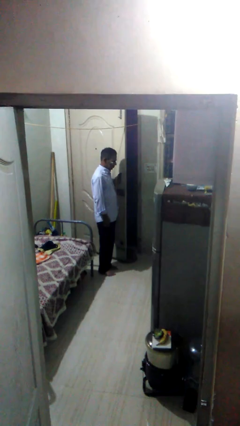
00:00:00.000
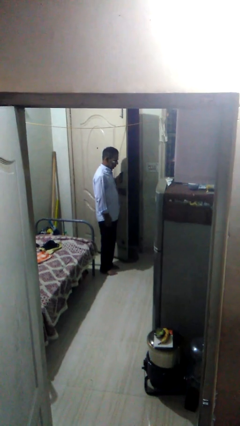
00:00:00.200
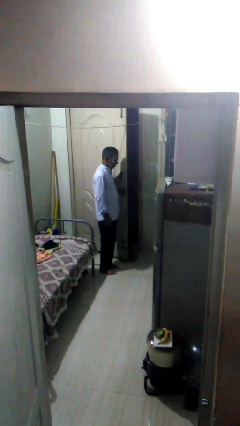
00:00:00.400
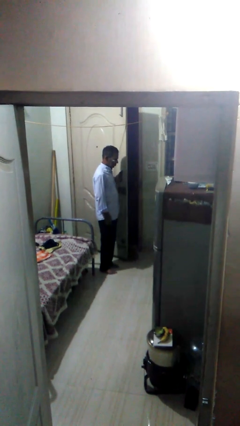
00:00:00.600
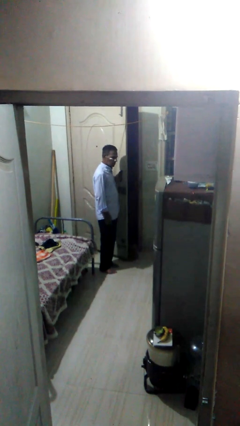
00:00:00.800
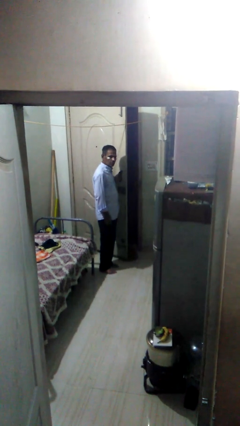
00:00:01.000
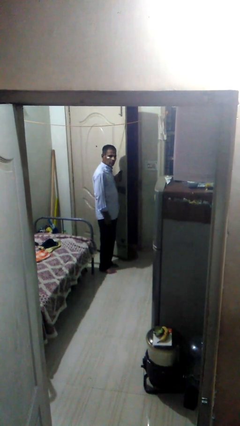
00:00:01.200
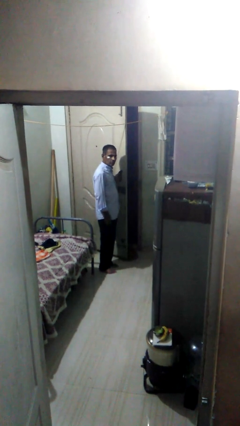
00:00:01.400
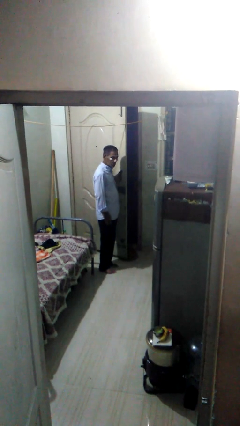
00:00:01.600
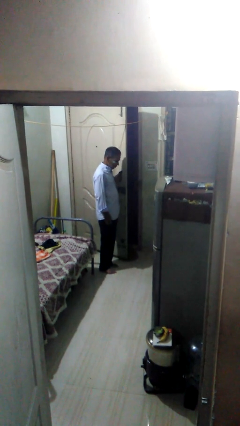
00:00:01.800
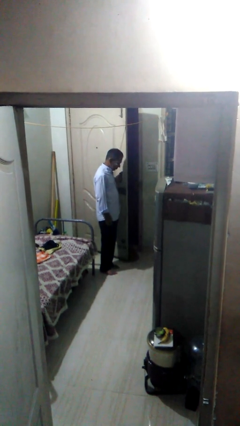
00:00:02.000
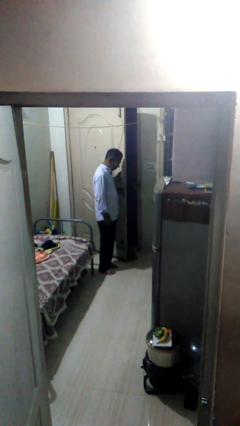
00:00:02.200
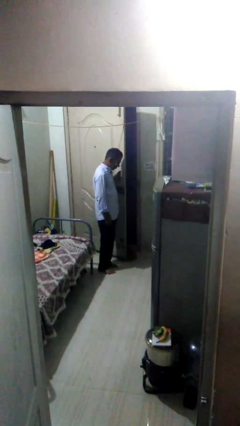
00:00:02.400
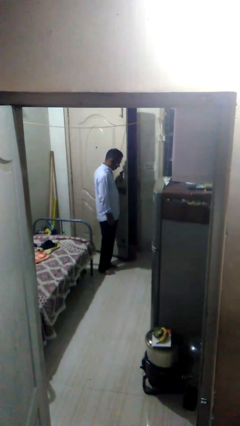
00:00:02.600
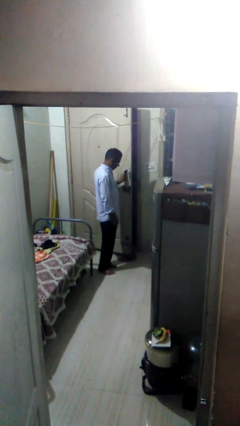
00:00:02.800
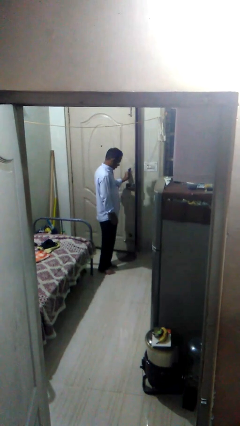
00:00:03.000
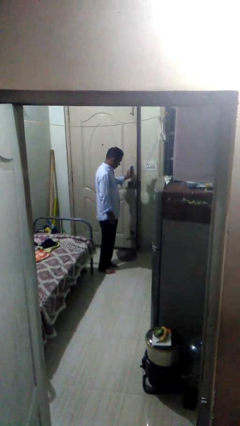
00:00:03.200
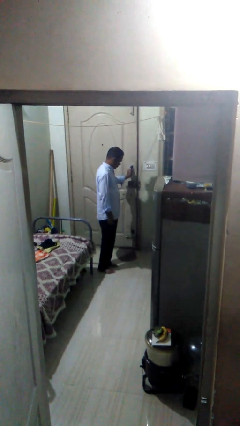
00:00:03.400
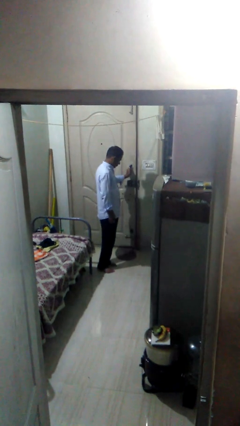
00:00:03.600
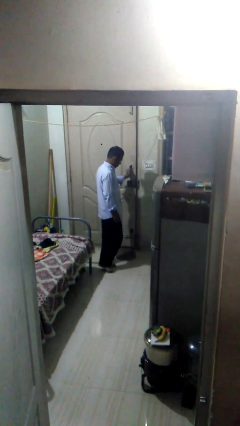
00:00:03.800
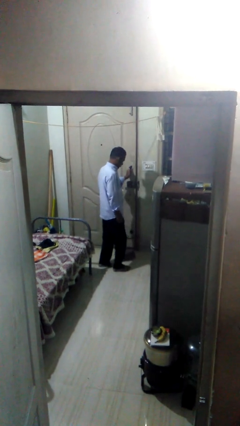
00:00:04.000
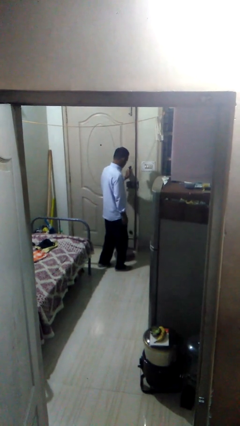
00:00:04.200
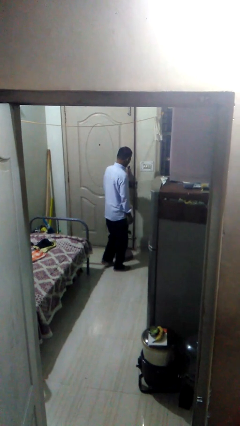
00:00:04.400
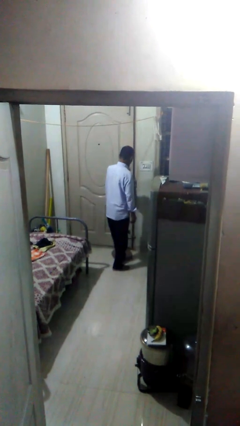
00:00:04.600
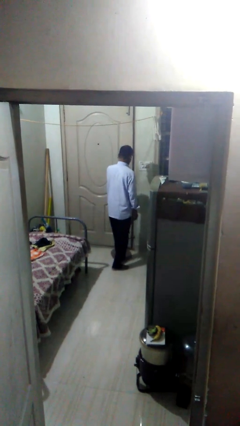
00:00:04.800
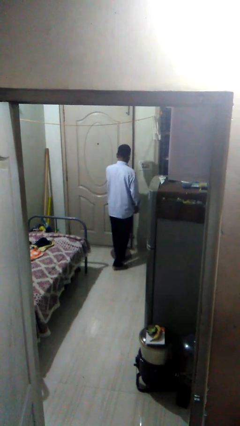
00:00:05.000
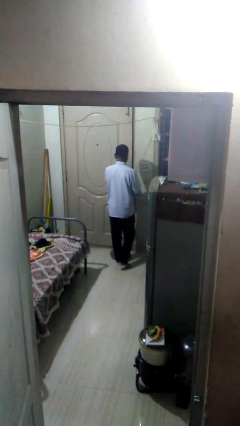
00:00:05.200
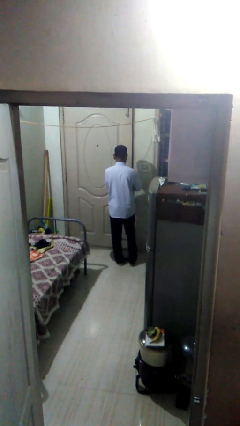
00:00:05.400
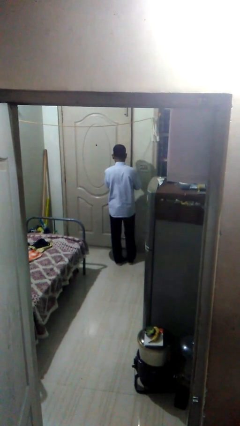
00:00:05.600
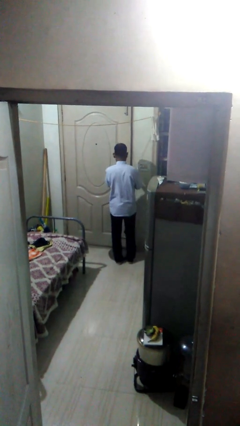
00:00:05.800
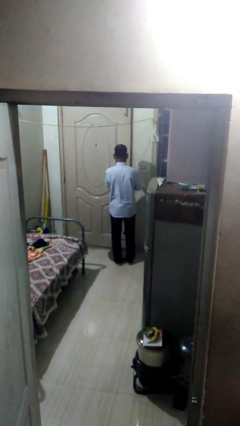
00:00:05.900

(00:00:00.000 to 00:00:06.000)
person closes facility door

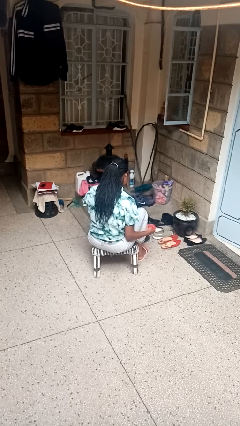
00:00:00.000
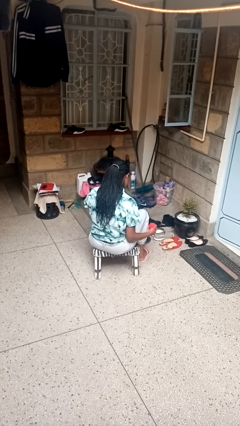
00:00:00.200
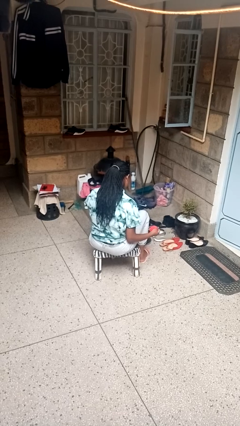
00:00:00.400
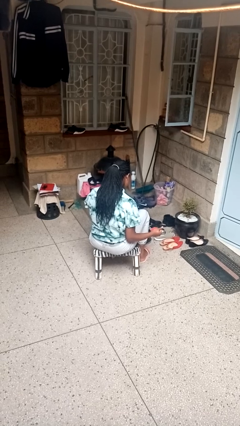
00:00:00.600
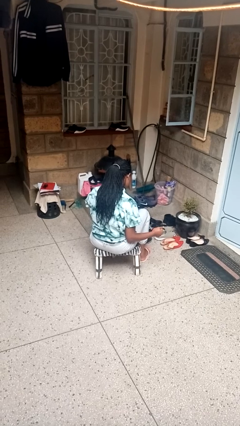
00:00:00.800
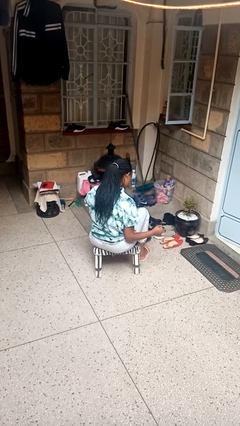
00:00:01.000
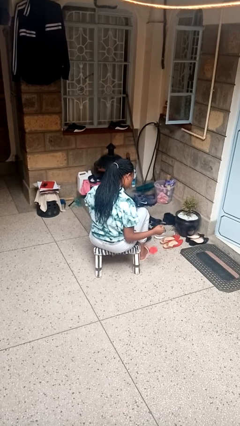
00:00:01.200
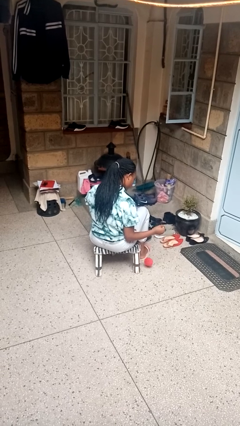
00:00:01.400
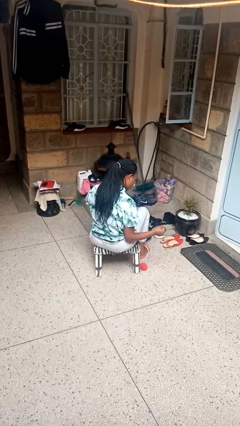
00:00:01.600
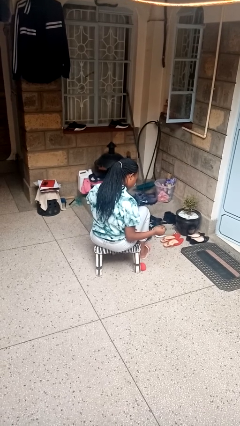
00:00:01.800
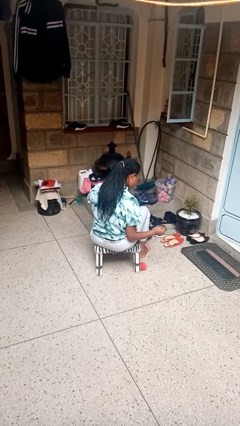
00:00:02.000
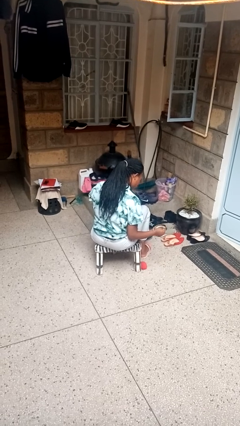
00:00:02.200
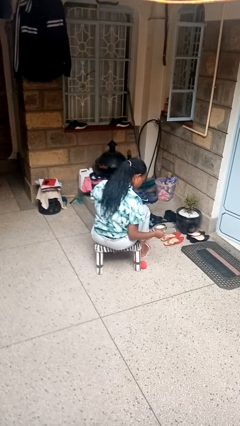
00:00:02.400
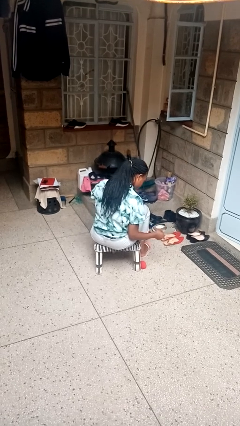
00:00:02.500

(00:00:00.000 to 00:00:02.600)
person drops object

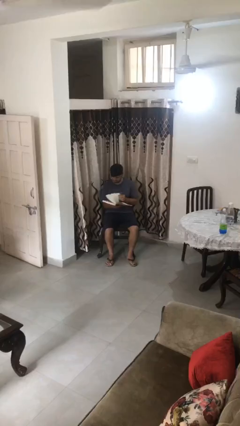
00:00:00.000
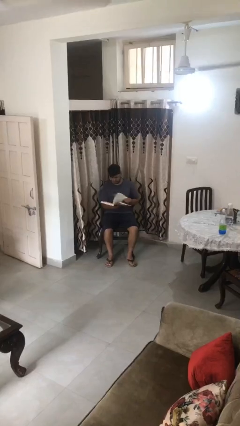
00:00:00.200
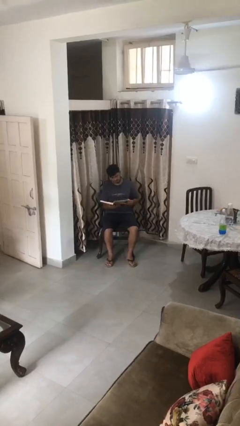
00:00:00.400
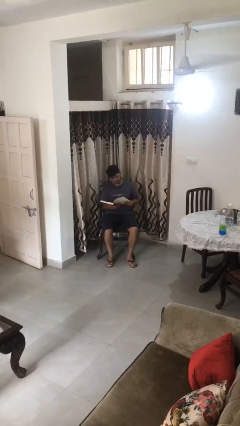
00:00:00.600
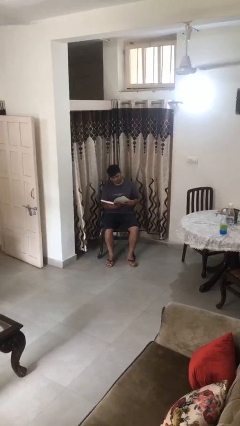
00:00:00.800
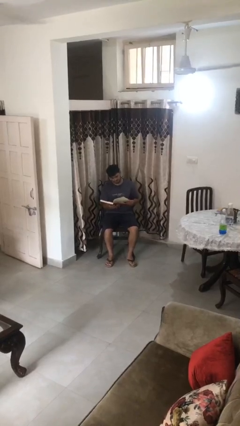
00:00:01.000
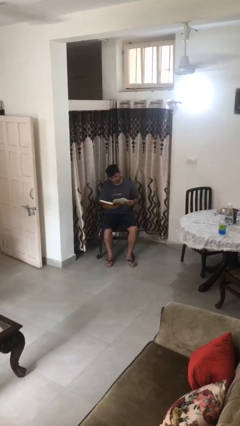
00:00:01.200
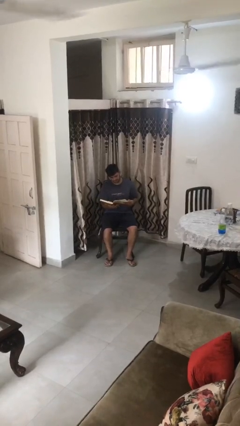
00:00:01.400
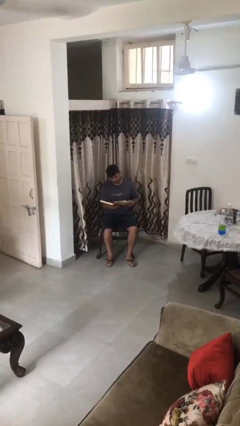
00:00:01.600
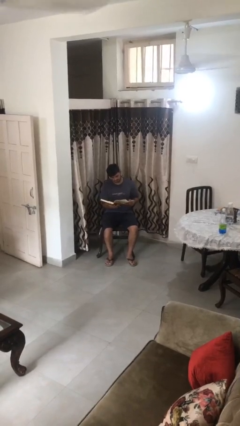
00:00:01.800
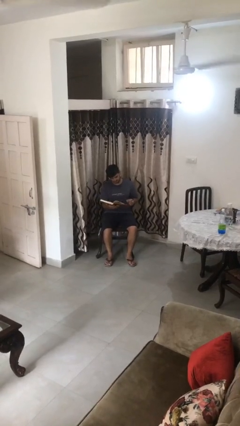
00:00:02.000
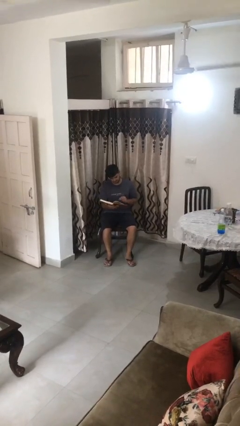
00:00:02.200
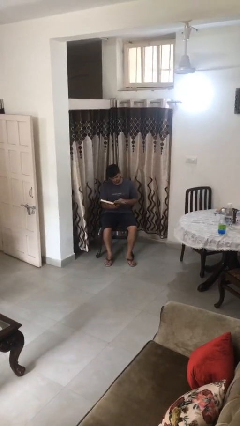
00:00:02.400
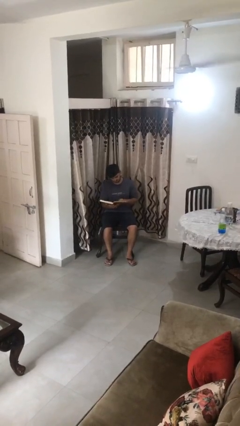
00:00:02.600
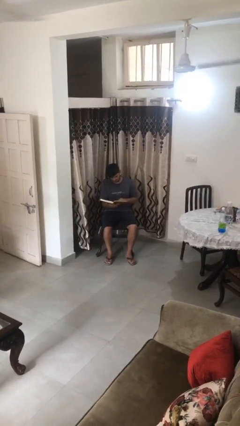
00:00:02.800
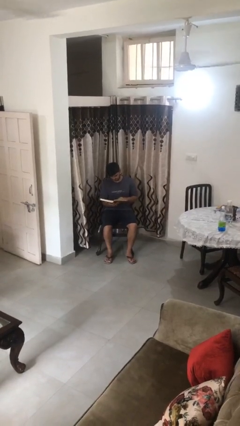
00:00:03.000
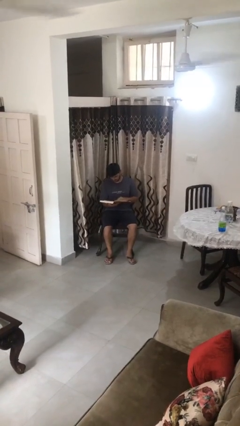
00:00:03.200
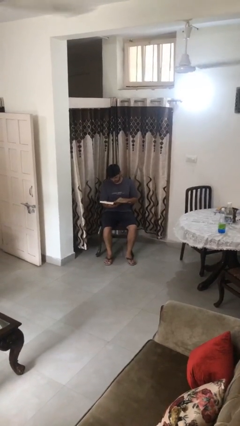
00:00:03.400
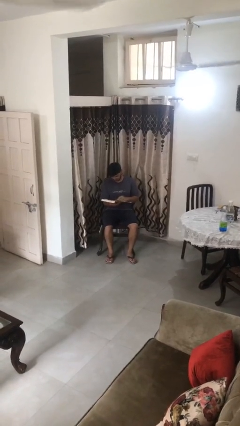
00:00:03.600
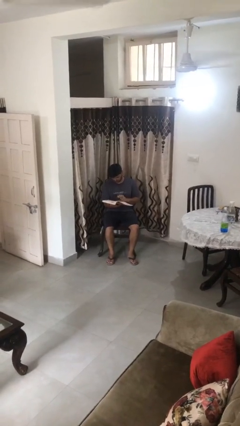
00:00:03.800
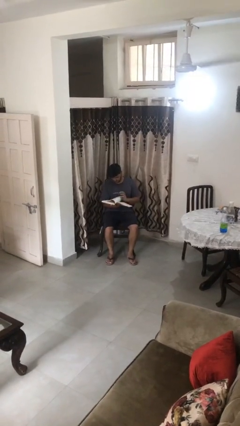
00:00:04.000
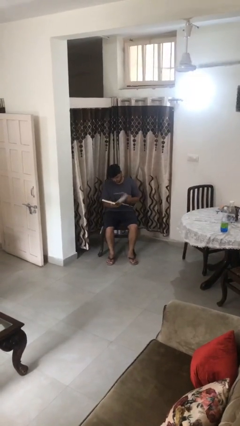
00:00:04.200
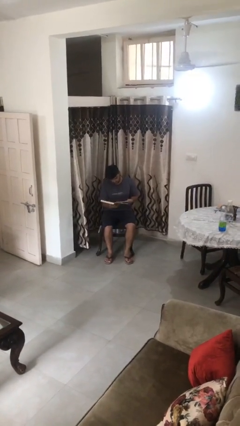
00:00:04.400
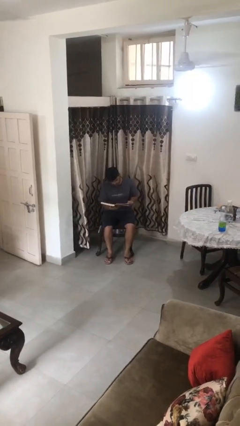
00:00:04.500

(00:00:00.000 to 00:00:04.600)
person reads document

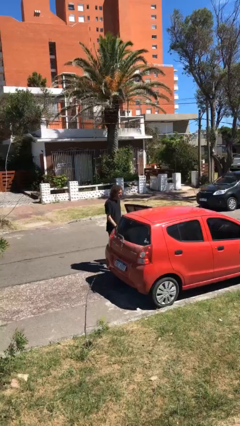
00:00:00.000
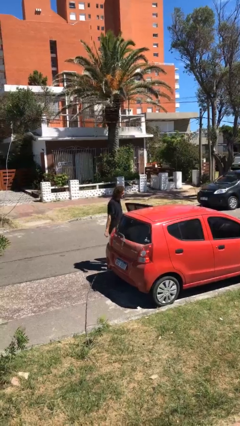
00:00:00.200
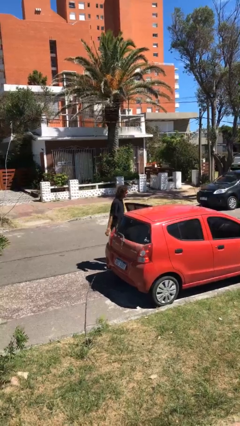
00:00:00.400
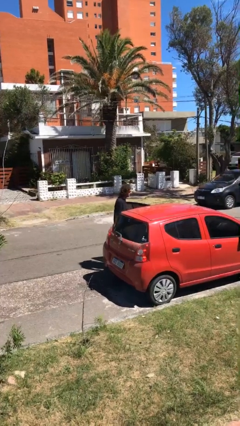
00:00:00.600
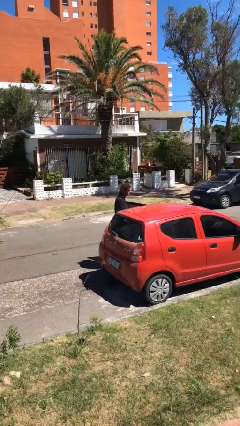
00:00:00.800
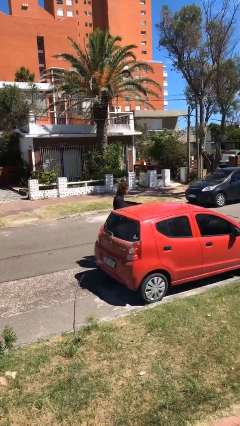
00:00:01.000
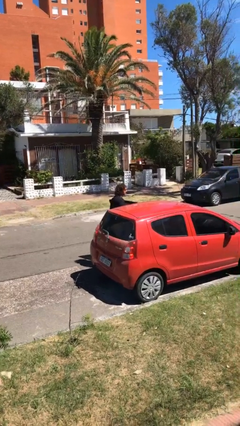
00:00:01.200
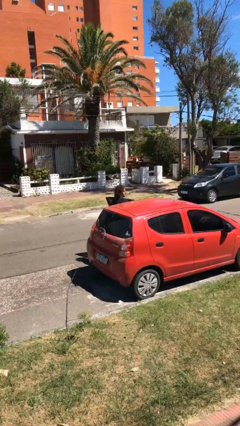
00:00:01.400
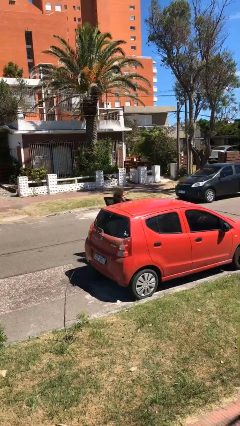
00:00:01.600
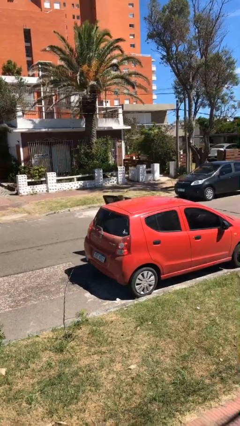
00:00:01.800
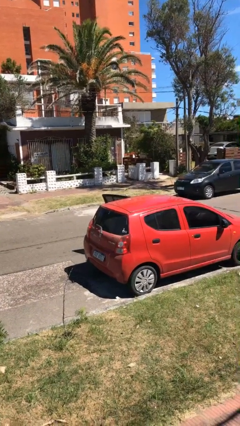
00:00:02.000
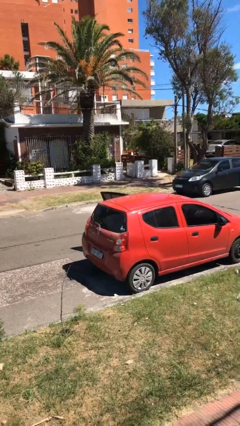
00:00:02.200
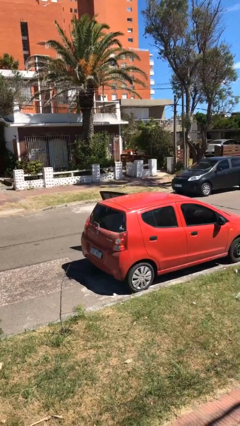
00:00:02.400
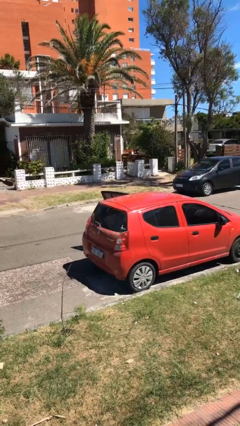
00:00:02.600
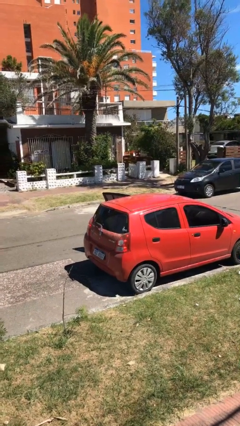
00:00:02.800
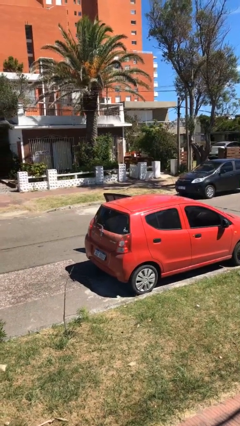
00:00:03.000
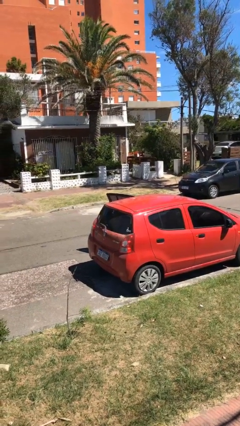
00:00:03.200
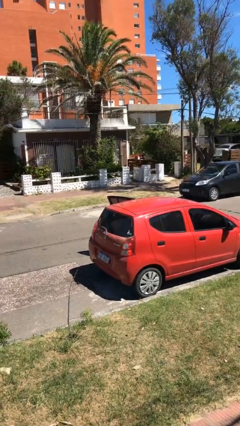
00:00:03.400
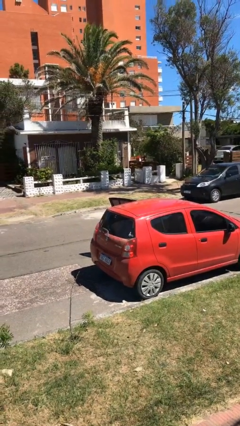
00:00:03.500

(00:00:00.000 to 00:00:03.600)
person enters car

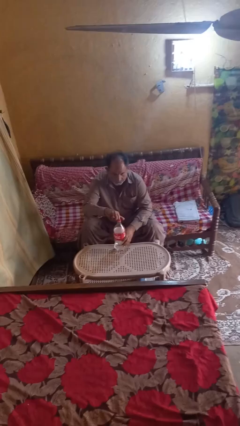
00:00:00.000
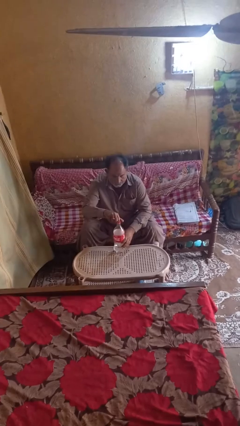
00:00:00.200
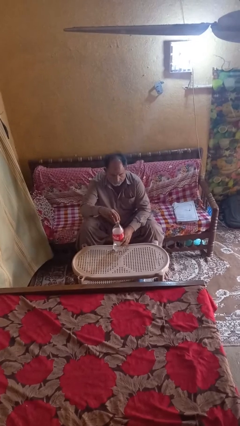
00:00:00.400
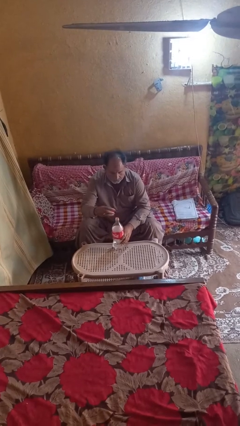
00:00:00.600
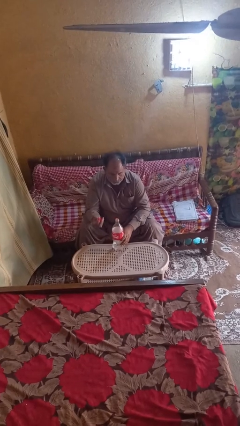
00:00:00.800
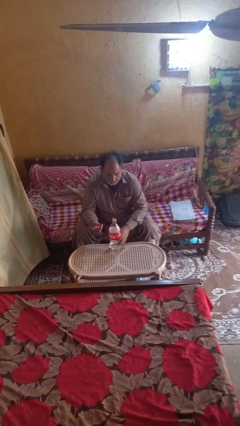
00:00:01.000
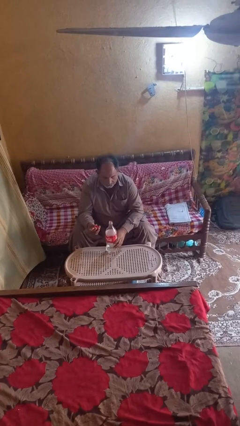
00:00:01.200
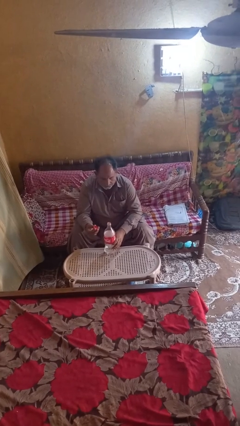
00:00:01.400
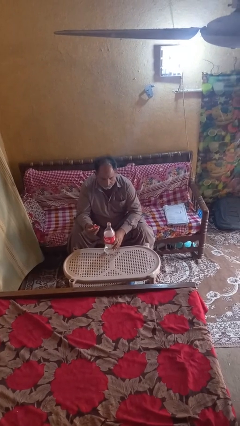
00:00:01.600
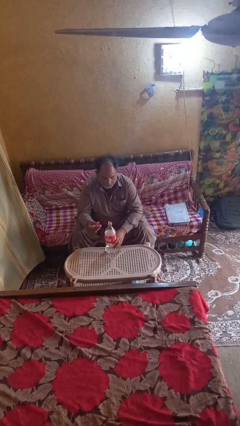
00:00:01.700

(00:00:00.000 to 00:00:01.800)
person unscrews lid from bottle
